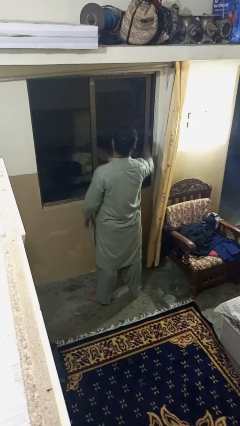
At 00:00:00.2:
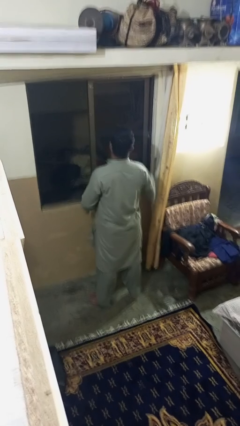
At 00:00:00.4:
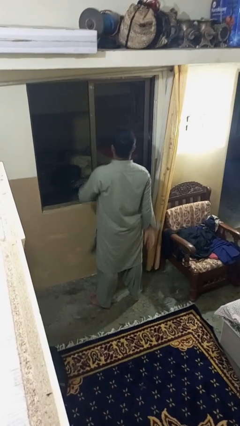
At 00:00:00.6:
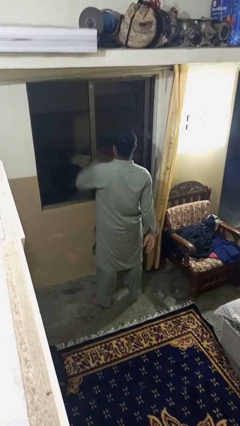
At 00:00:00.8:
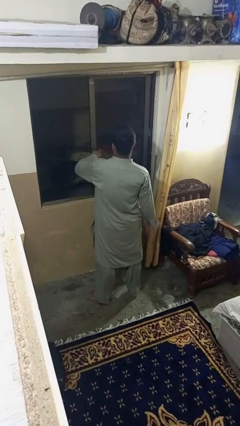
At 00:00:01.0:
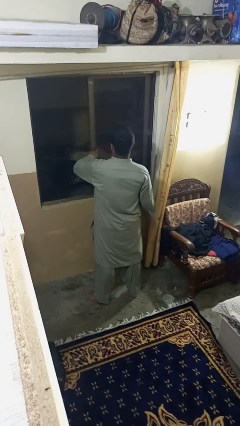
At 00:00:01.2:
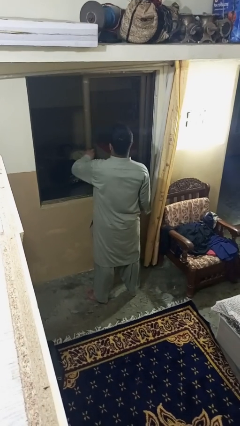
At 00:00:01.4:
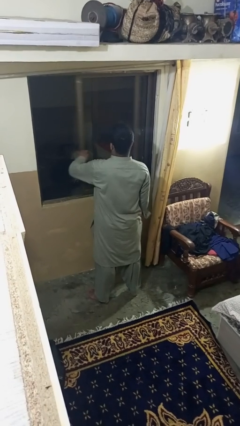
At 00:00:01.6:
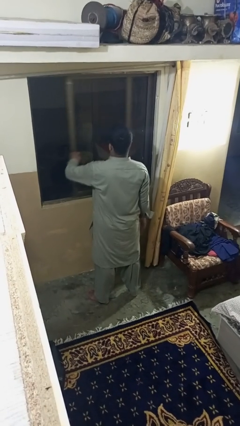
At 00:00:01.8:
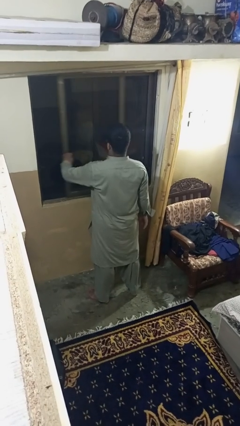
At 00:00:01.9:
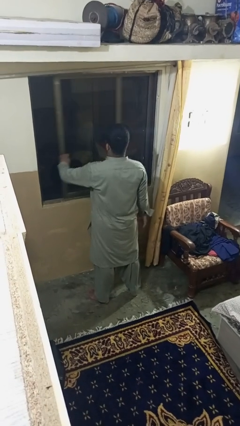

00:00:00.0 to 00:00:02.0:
person closes home window

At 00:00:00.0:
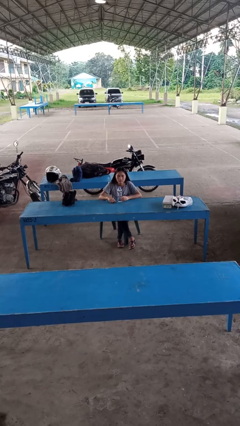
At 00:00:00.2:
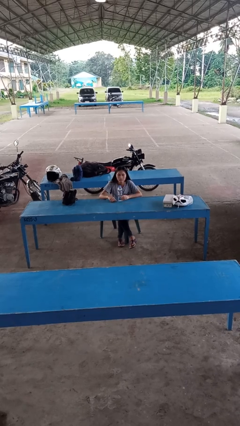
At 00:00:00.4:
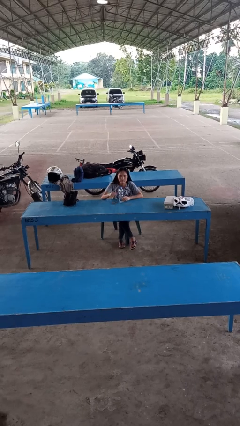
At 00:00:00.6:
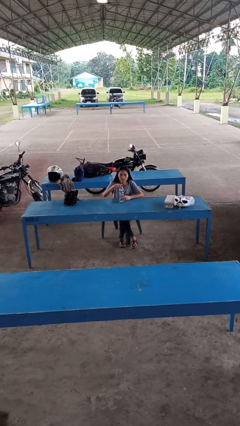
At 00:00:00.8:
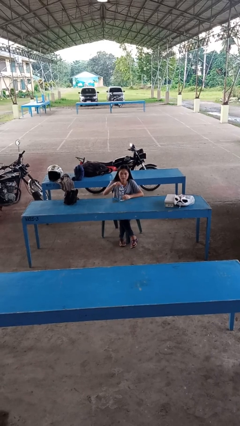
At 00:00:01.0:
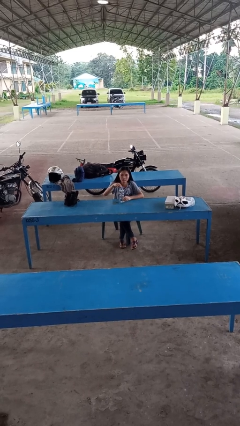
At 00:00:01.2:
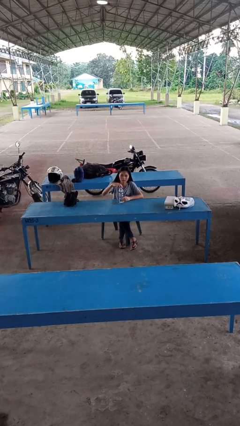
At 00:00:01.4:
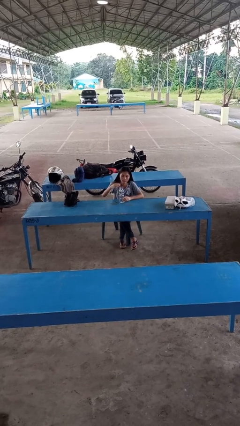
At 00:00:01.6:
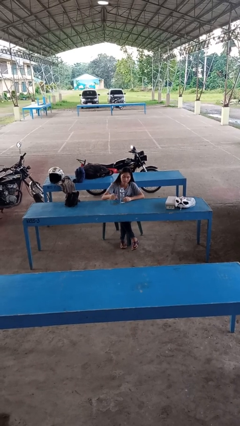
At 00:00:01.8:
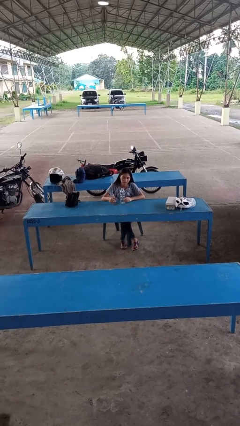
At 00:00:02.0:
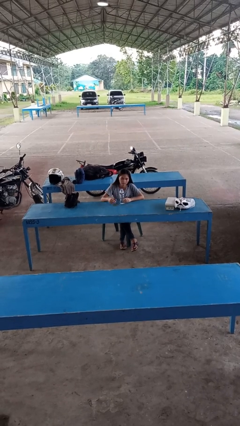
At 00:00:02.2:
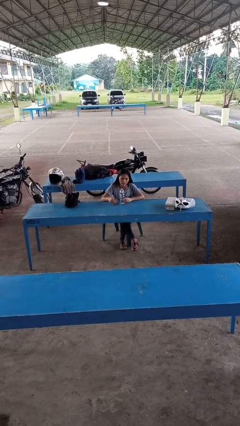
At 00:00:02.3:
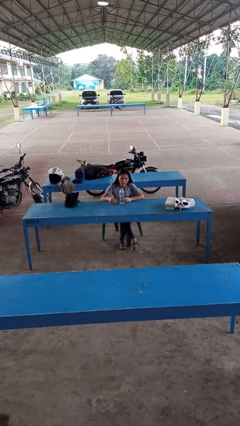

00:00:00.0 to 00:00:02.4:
person unscrews lid from bottle

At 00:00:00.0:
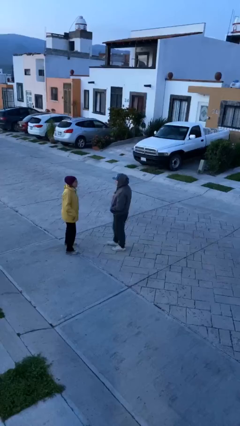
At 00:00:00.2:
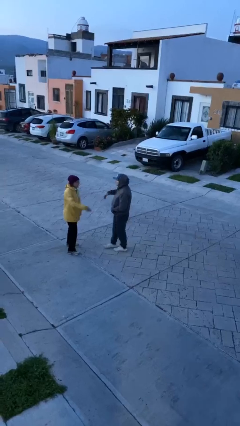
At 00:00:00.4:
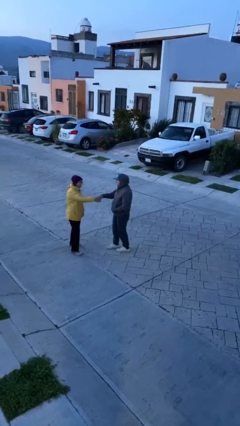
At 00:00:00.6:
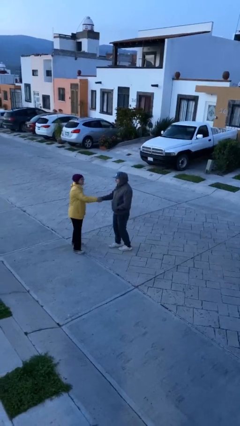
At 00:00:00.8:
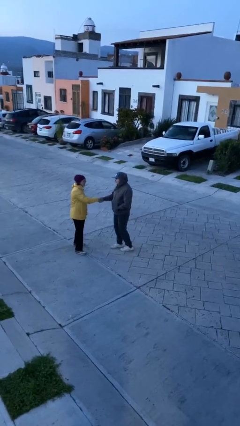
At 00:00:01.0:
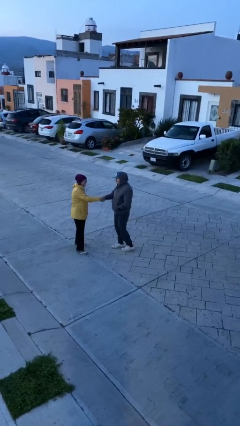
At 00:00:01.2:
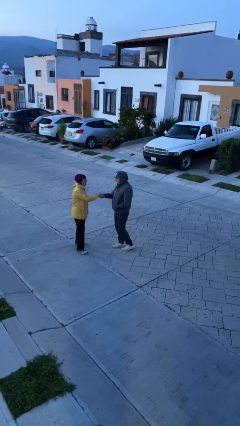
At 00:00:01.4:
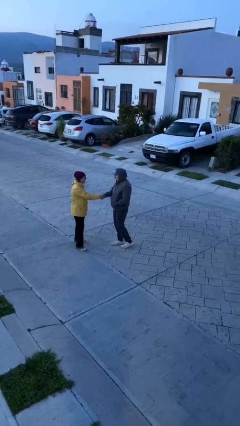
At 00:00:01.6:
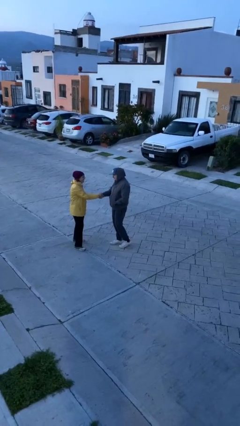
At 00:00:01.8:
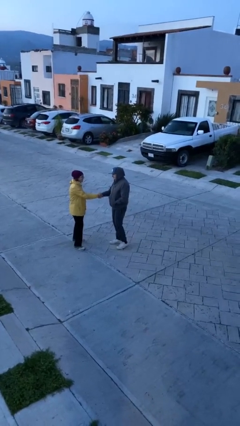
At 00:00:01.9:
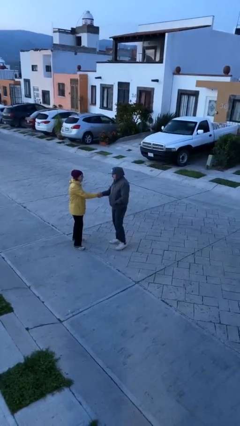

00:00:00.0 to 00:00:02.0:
person shakes hand

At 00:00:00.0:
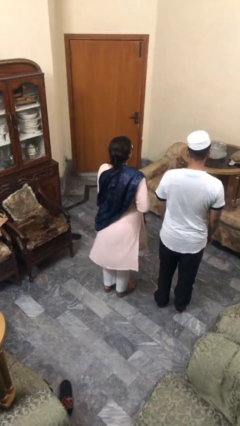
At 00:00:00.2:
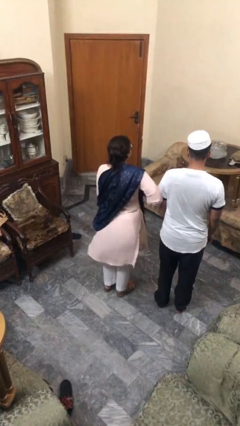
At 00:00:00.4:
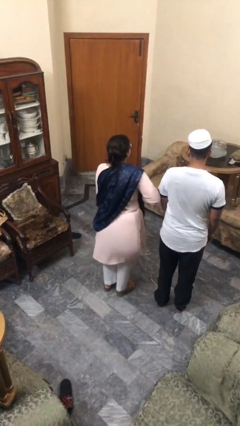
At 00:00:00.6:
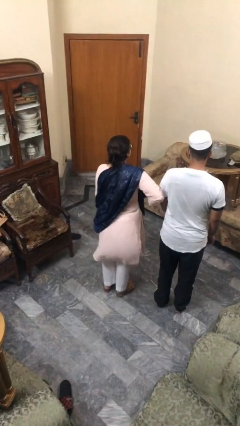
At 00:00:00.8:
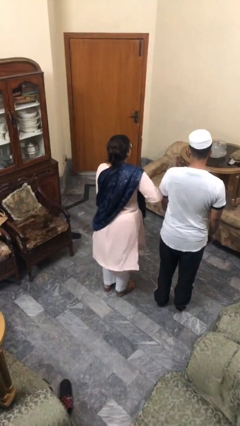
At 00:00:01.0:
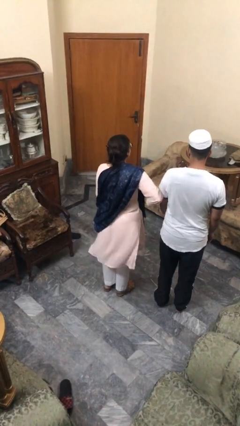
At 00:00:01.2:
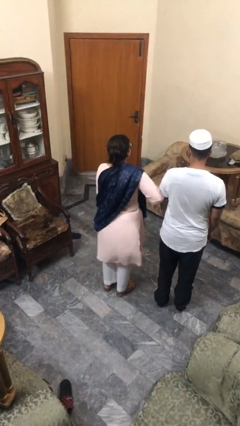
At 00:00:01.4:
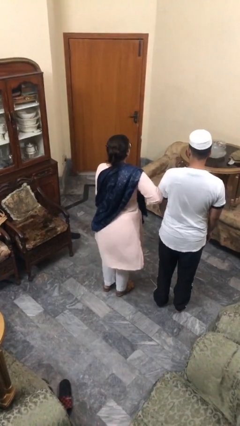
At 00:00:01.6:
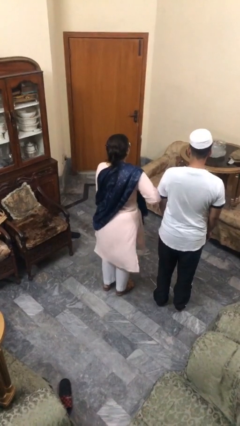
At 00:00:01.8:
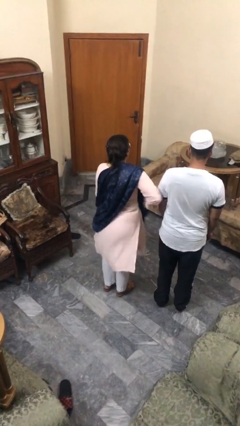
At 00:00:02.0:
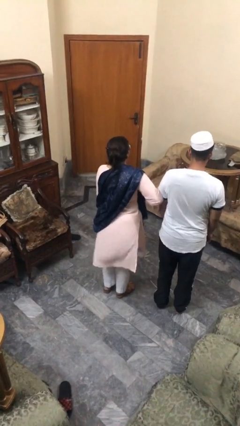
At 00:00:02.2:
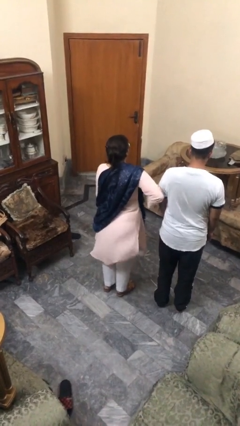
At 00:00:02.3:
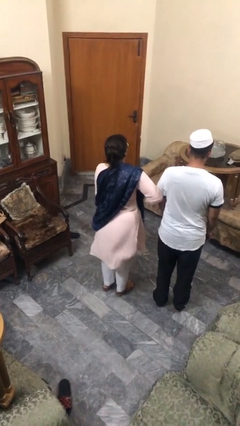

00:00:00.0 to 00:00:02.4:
person nudges person with elbow

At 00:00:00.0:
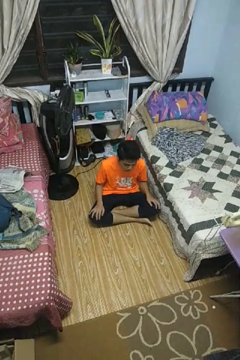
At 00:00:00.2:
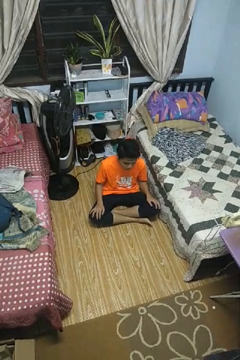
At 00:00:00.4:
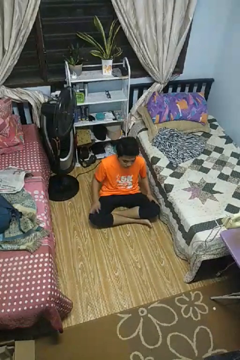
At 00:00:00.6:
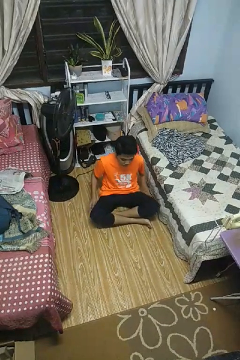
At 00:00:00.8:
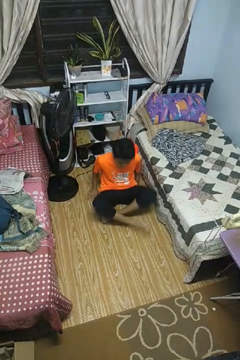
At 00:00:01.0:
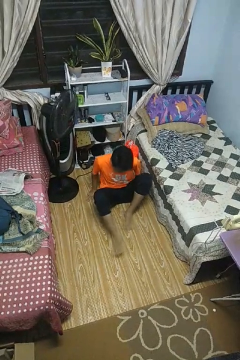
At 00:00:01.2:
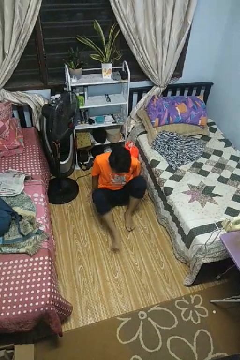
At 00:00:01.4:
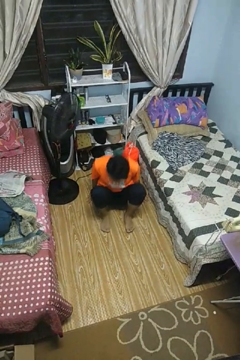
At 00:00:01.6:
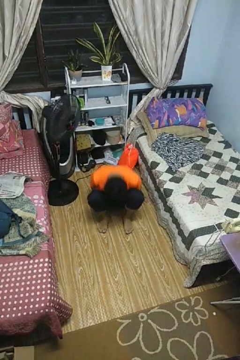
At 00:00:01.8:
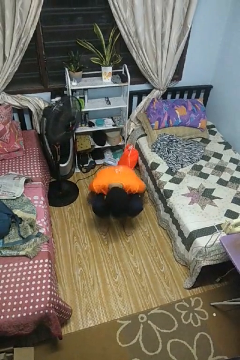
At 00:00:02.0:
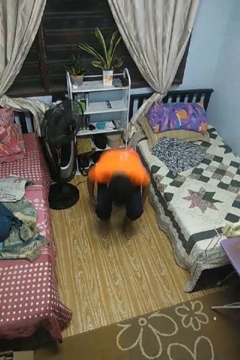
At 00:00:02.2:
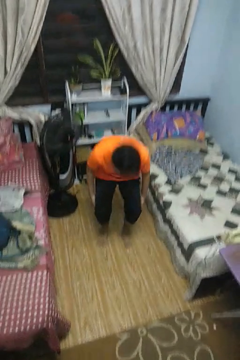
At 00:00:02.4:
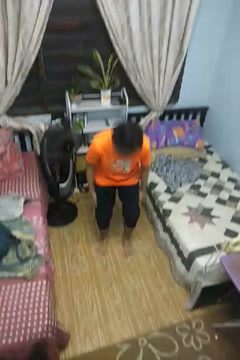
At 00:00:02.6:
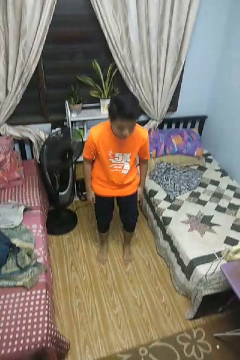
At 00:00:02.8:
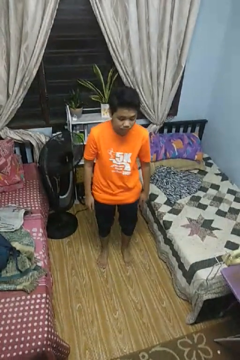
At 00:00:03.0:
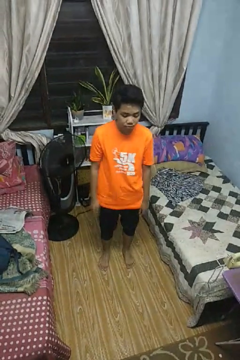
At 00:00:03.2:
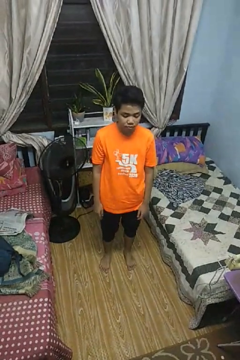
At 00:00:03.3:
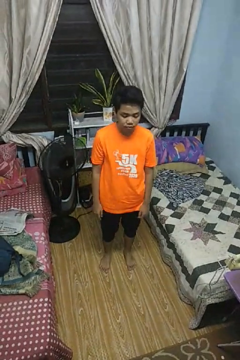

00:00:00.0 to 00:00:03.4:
person stands up from floor

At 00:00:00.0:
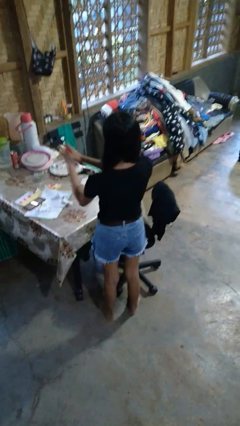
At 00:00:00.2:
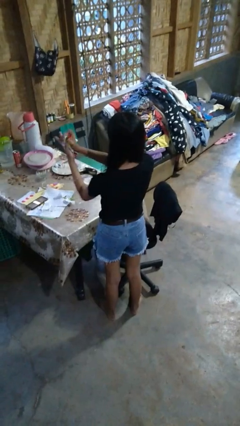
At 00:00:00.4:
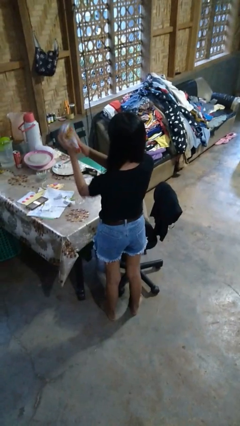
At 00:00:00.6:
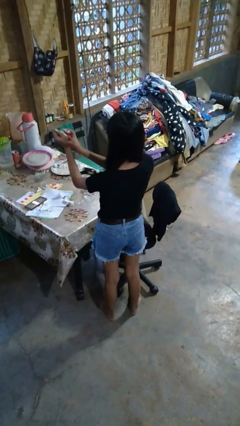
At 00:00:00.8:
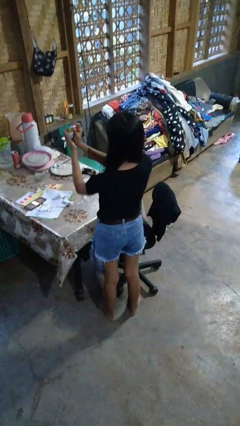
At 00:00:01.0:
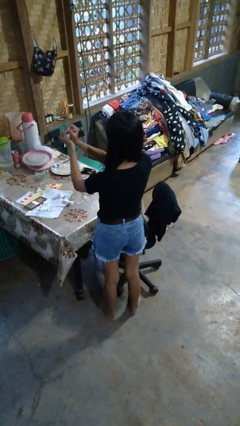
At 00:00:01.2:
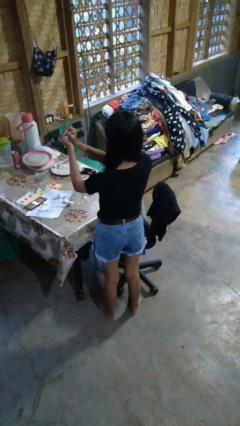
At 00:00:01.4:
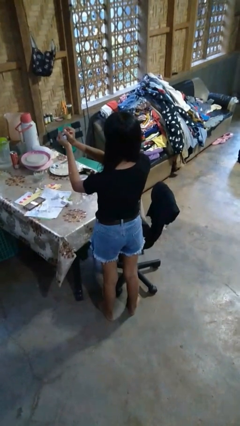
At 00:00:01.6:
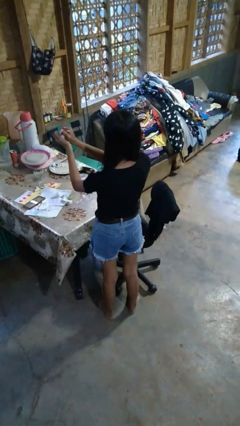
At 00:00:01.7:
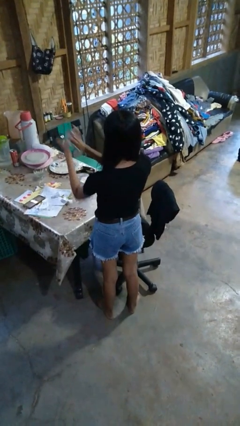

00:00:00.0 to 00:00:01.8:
person crumples paper

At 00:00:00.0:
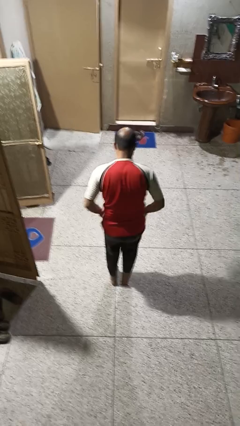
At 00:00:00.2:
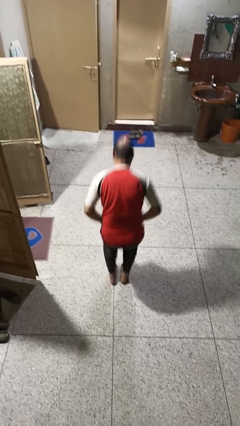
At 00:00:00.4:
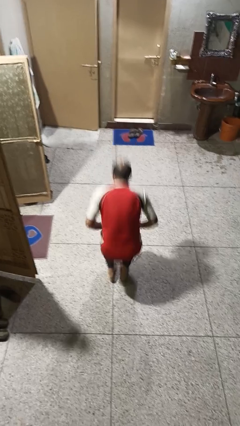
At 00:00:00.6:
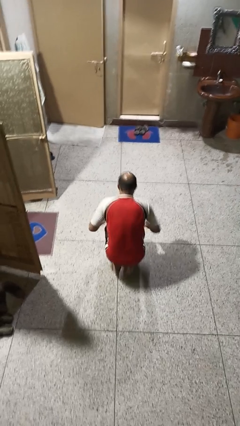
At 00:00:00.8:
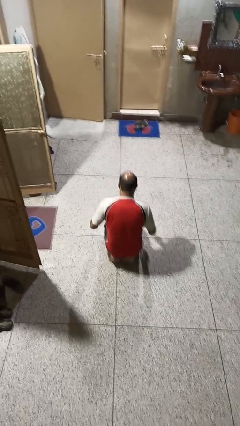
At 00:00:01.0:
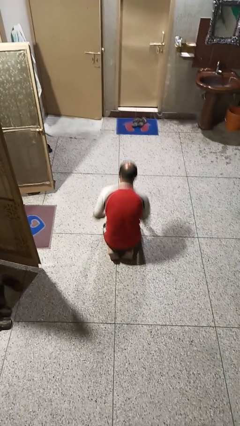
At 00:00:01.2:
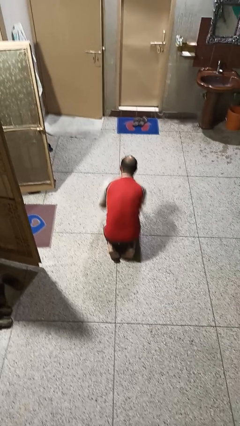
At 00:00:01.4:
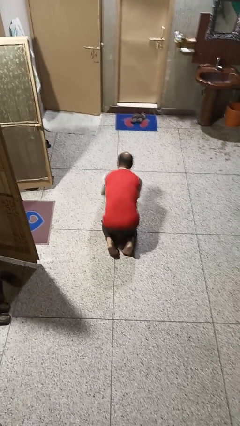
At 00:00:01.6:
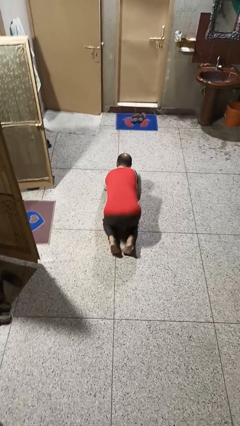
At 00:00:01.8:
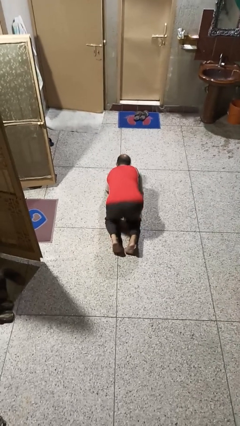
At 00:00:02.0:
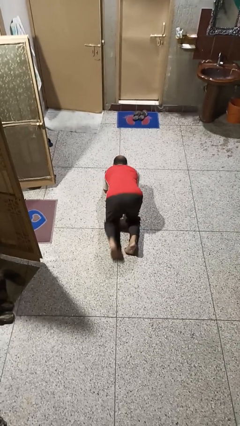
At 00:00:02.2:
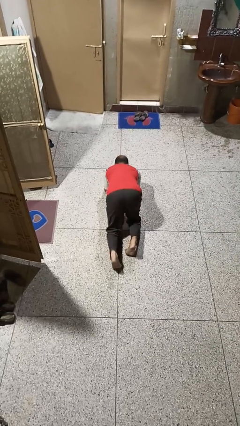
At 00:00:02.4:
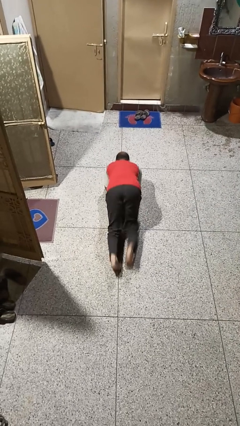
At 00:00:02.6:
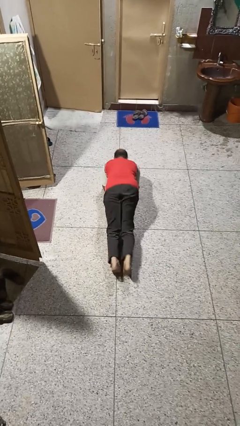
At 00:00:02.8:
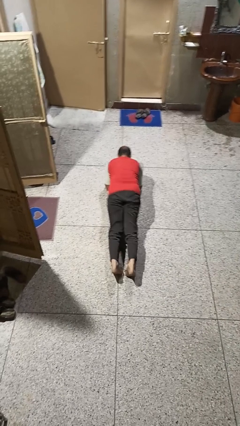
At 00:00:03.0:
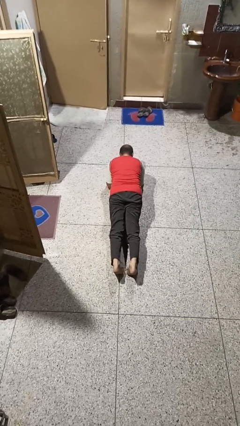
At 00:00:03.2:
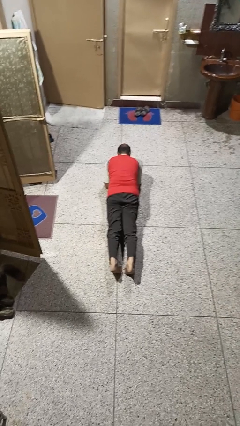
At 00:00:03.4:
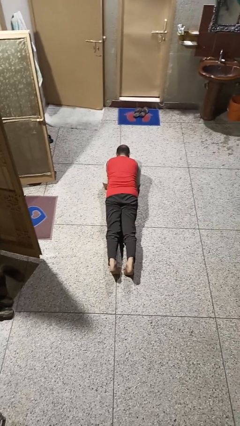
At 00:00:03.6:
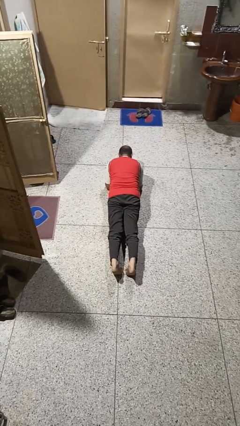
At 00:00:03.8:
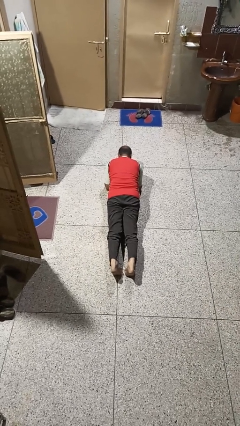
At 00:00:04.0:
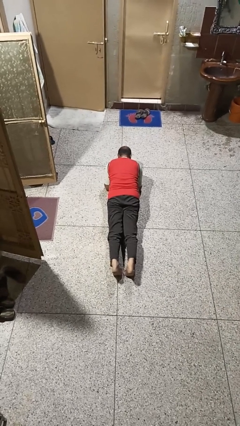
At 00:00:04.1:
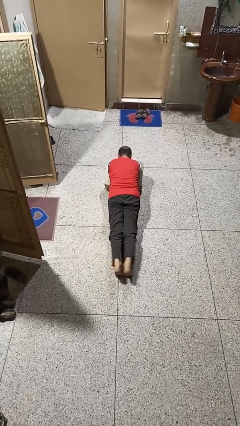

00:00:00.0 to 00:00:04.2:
person exercises with plank
